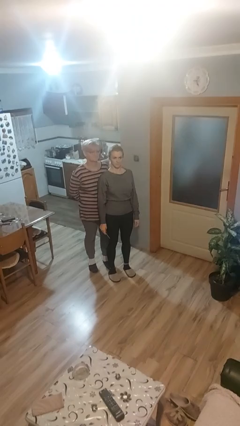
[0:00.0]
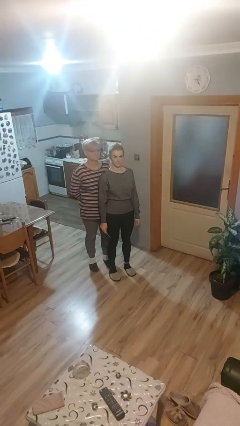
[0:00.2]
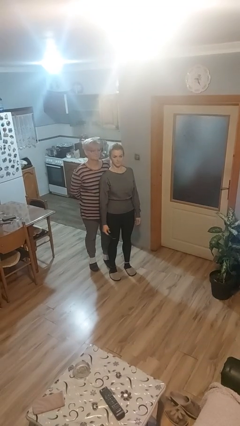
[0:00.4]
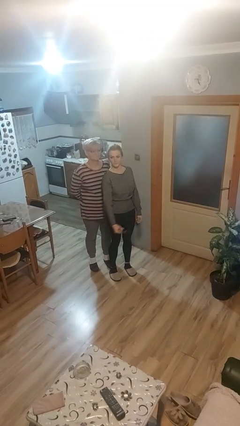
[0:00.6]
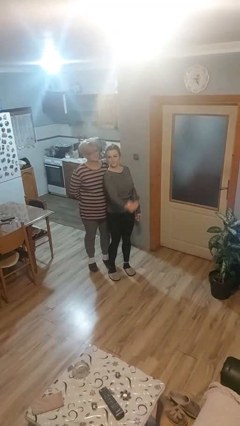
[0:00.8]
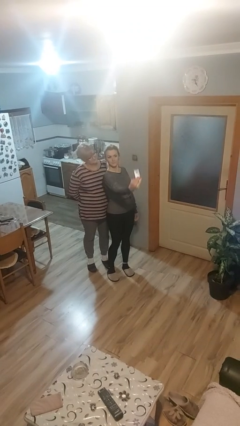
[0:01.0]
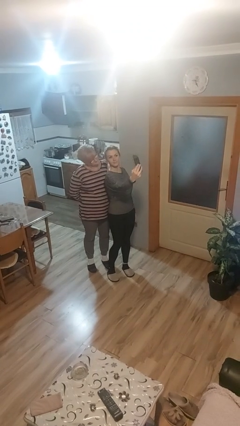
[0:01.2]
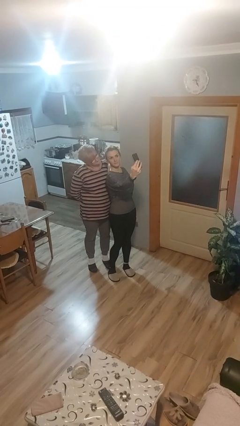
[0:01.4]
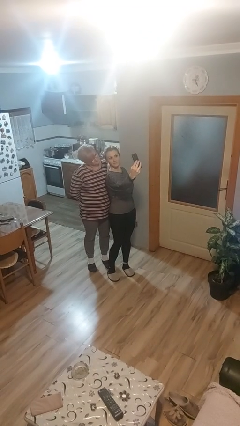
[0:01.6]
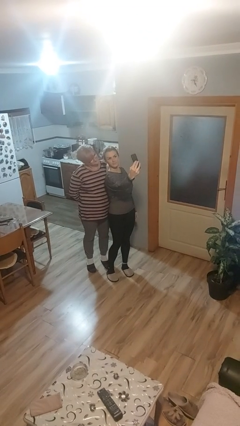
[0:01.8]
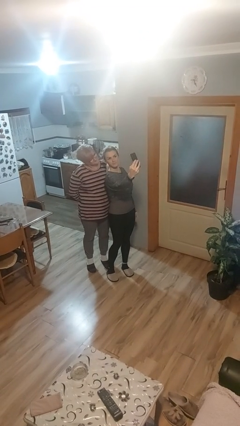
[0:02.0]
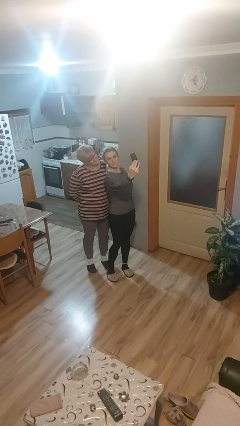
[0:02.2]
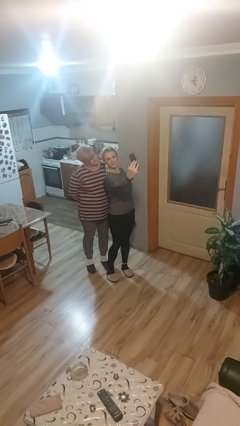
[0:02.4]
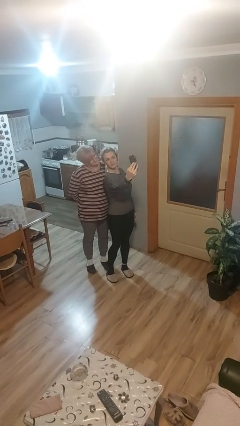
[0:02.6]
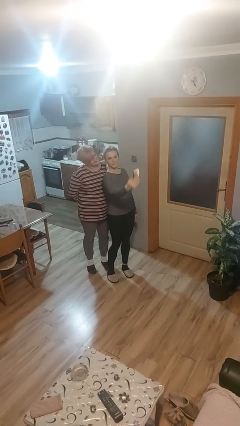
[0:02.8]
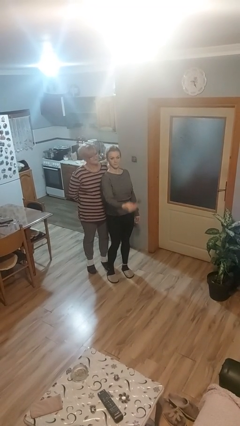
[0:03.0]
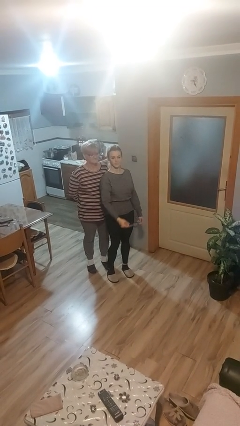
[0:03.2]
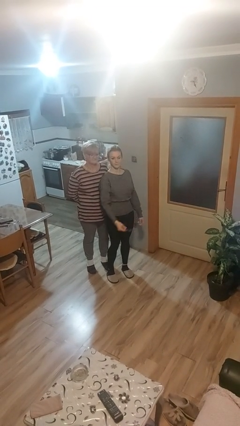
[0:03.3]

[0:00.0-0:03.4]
person takes selfie with person

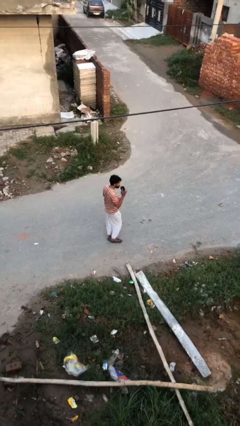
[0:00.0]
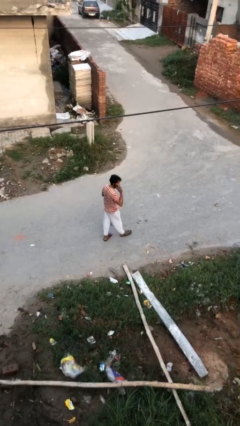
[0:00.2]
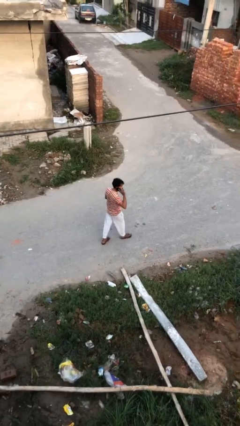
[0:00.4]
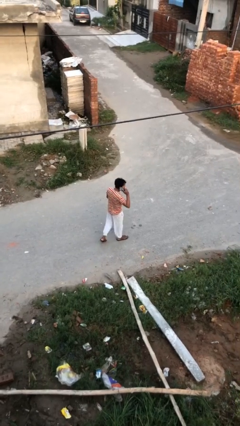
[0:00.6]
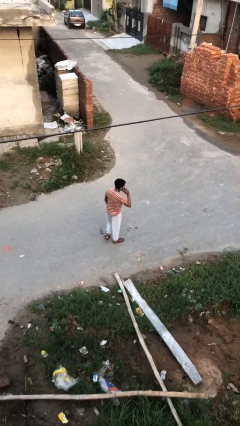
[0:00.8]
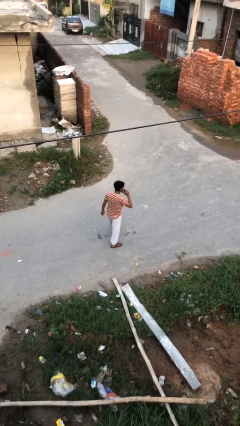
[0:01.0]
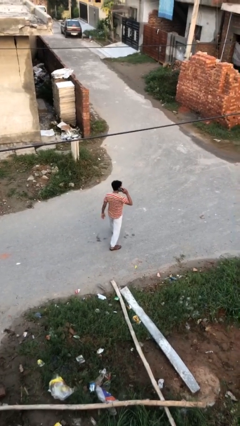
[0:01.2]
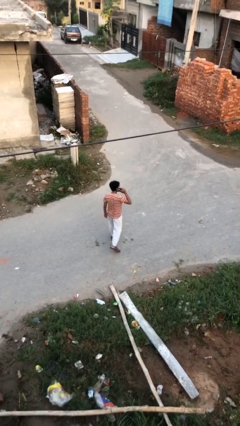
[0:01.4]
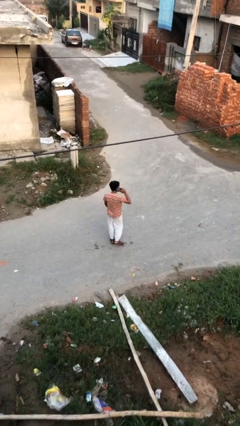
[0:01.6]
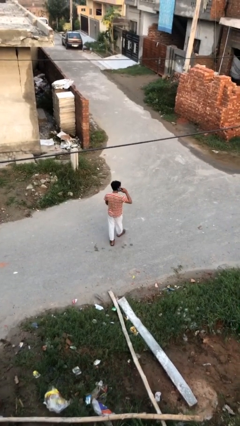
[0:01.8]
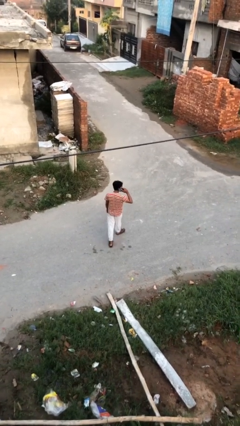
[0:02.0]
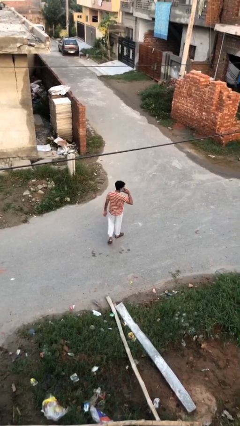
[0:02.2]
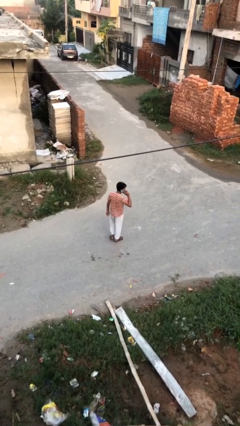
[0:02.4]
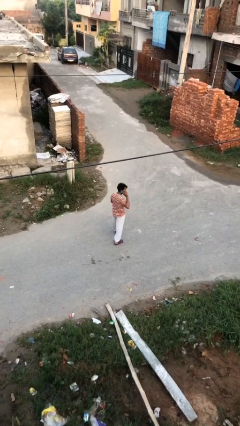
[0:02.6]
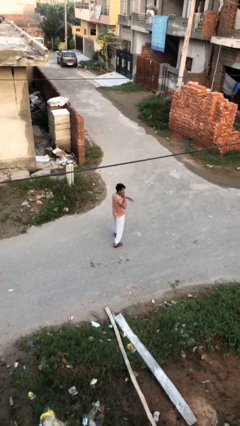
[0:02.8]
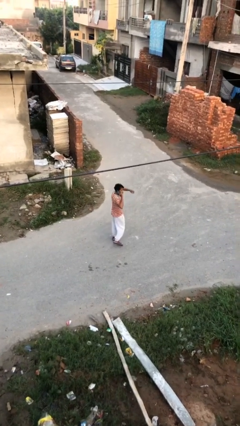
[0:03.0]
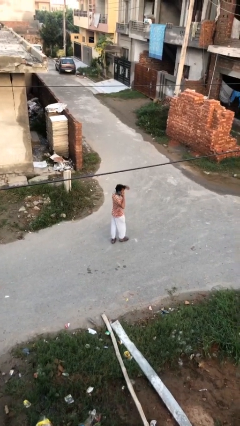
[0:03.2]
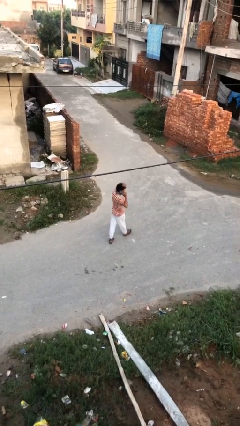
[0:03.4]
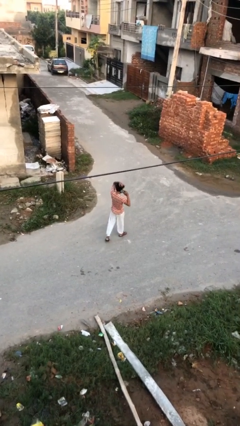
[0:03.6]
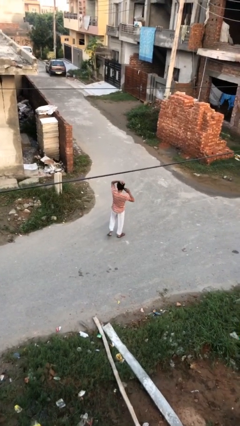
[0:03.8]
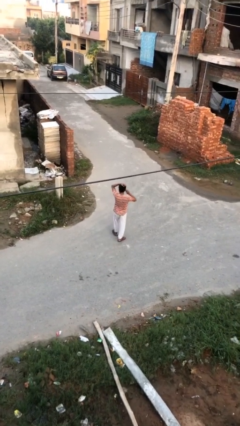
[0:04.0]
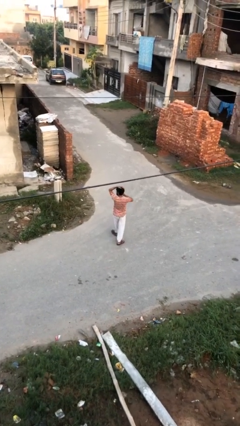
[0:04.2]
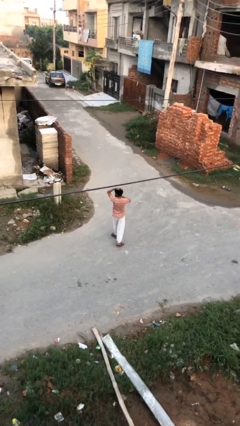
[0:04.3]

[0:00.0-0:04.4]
person talks on phone

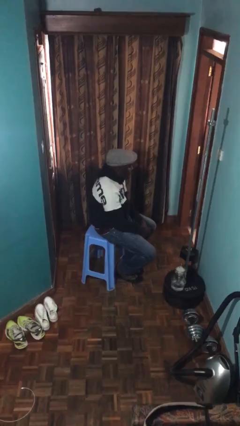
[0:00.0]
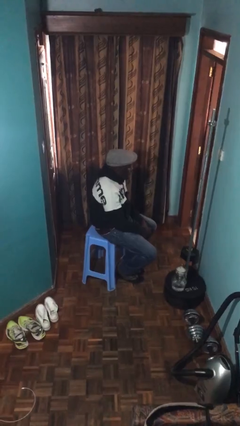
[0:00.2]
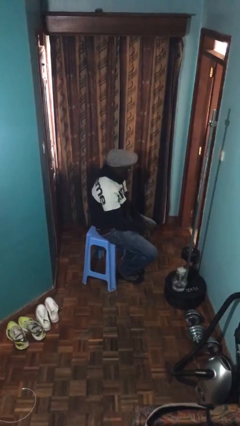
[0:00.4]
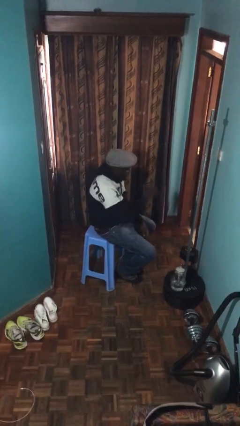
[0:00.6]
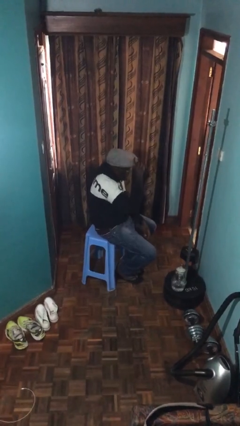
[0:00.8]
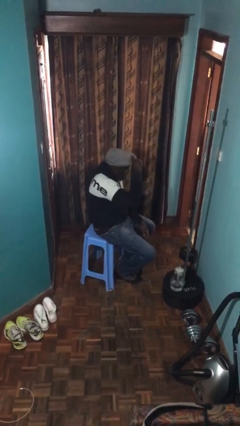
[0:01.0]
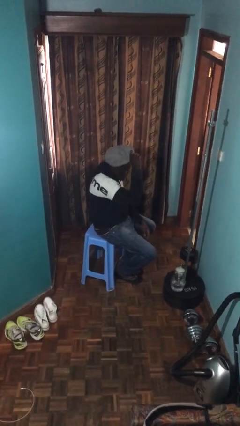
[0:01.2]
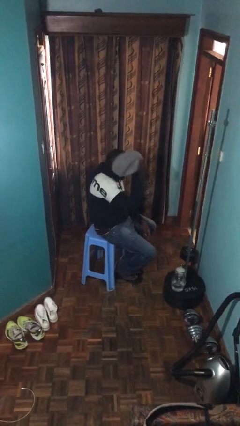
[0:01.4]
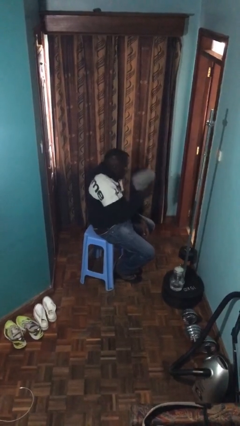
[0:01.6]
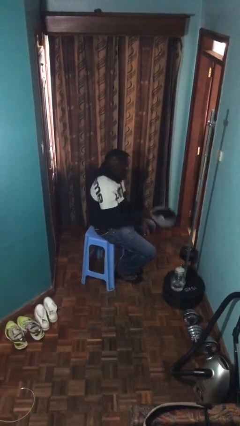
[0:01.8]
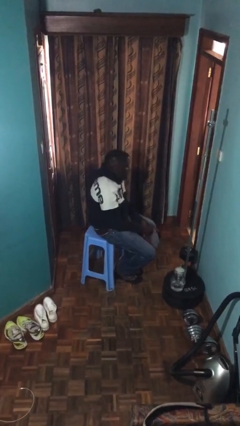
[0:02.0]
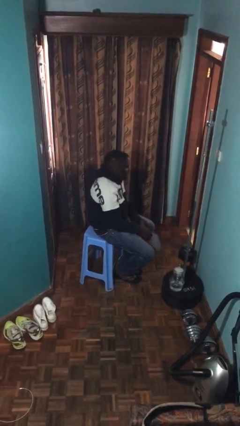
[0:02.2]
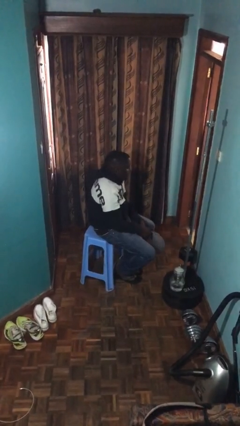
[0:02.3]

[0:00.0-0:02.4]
person takes off hat

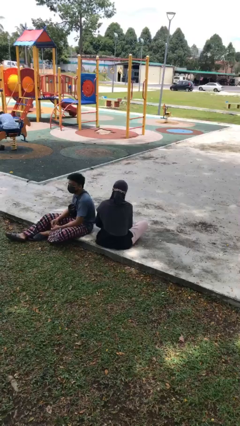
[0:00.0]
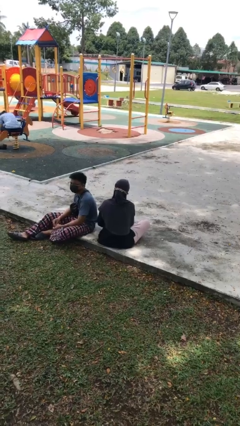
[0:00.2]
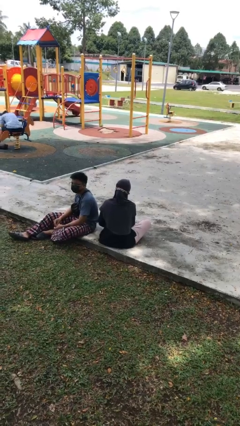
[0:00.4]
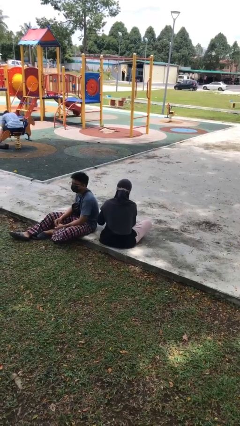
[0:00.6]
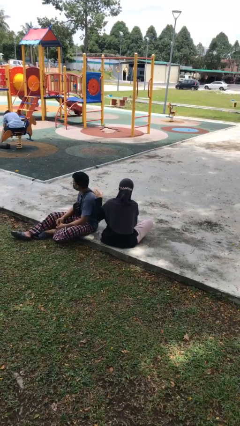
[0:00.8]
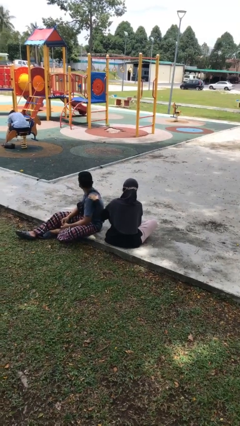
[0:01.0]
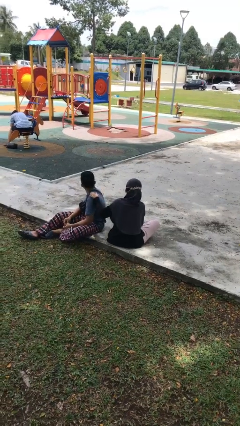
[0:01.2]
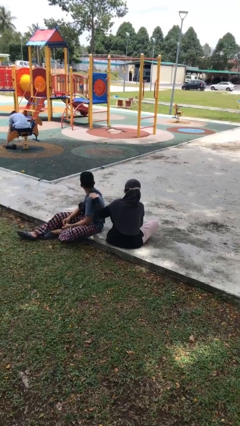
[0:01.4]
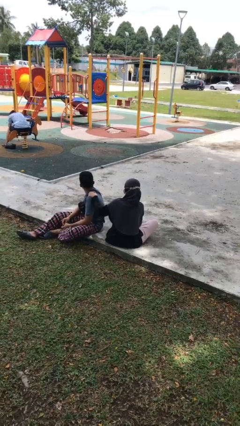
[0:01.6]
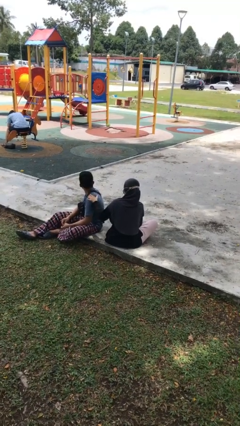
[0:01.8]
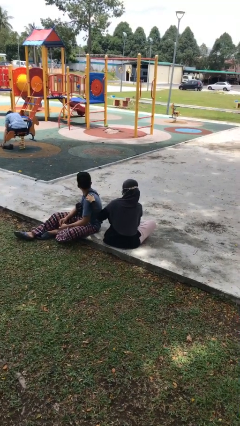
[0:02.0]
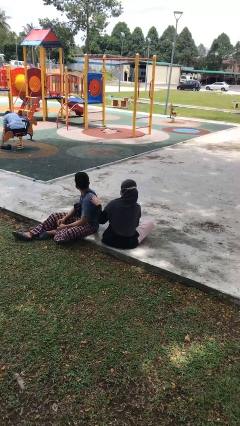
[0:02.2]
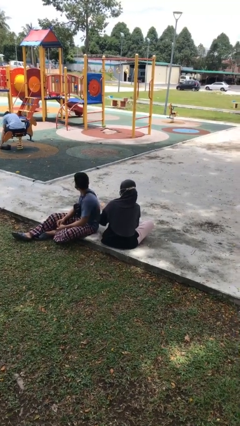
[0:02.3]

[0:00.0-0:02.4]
person pounds shoulders of person

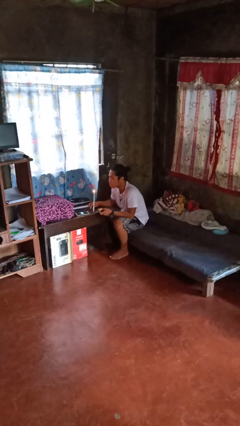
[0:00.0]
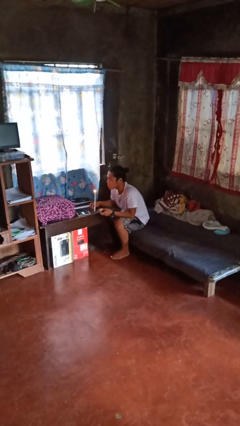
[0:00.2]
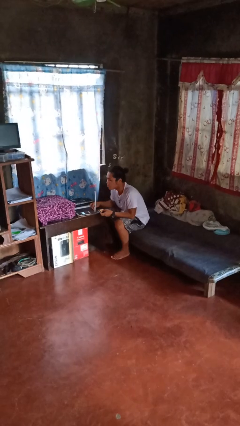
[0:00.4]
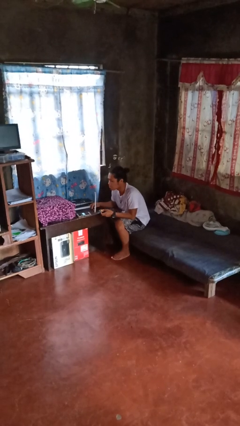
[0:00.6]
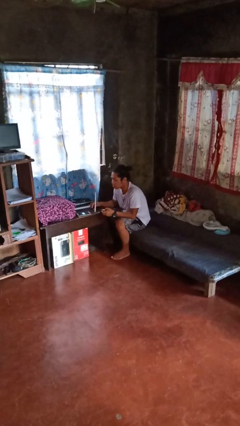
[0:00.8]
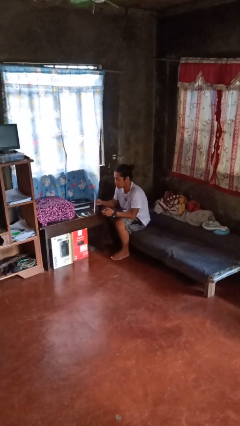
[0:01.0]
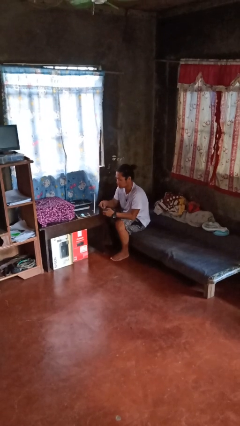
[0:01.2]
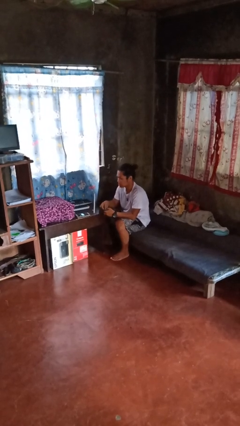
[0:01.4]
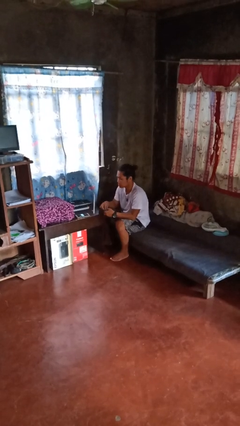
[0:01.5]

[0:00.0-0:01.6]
person extinguishes candle

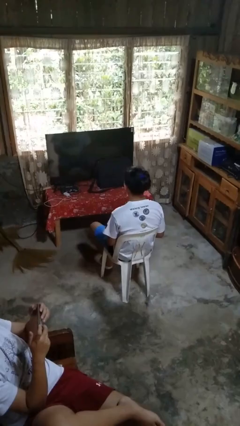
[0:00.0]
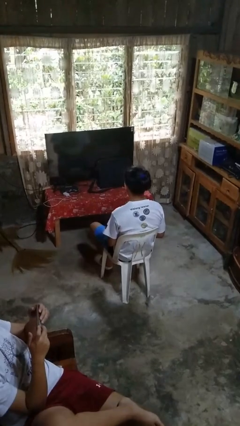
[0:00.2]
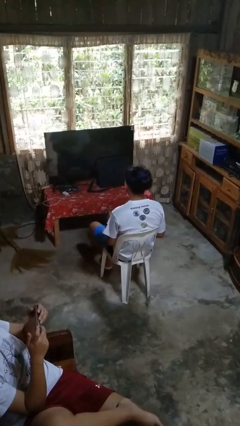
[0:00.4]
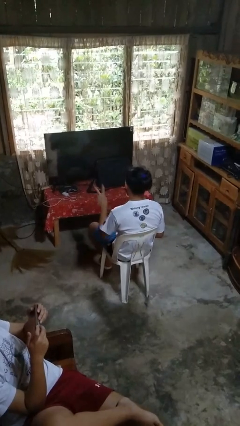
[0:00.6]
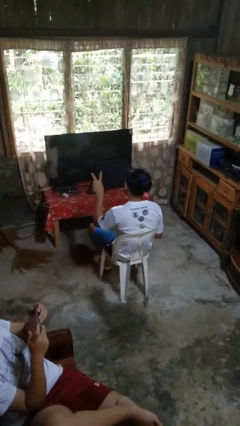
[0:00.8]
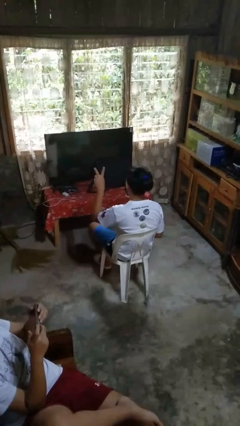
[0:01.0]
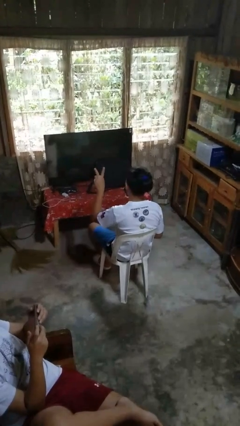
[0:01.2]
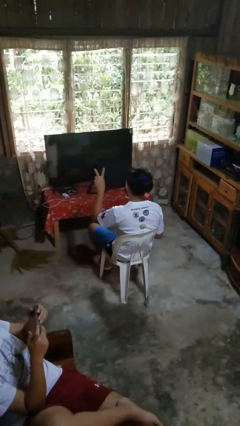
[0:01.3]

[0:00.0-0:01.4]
person gestures peace

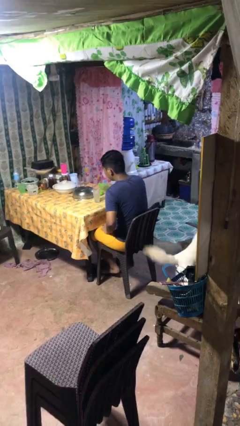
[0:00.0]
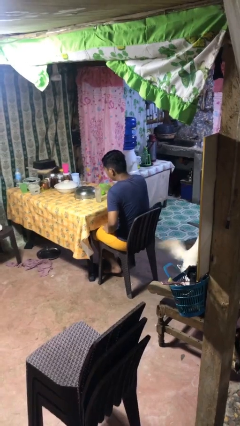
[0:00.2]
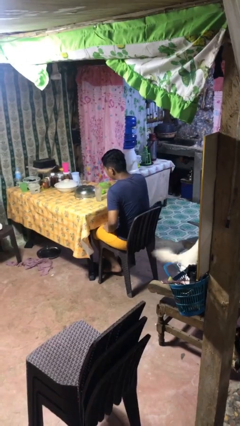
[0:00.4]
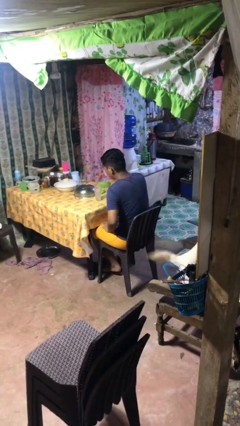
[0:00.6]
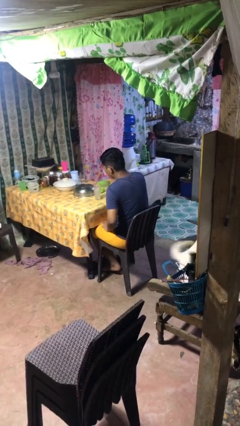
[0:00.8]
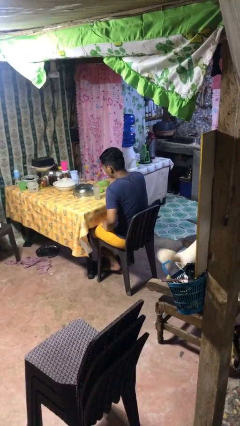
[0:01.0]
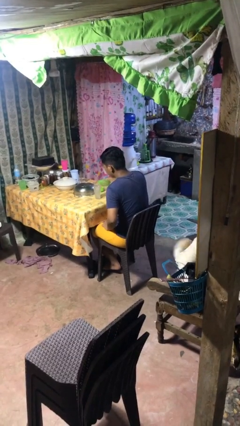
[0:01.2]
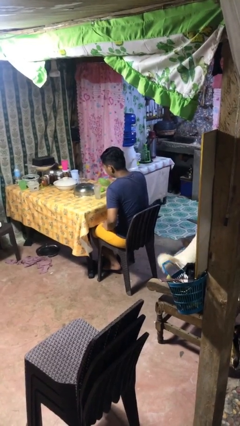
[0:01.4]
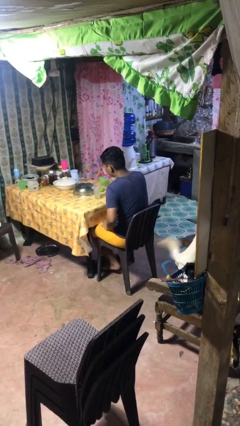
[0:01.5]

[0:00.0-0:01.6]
person pours liquid into cup

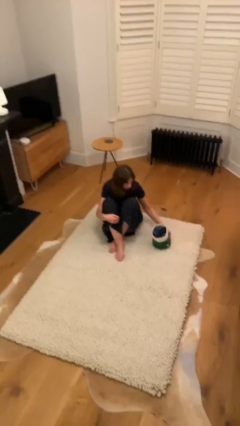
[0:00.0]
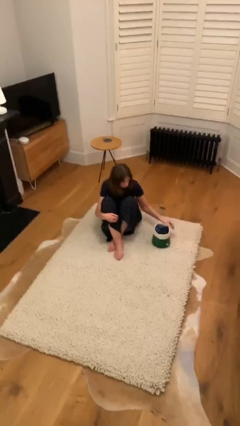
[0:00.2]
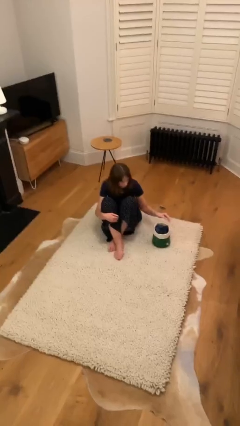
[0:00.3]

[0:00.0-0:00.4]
person puts down object on floor
